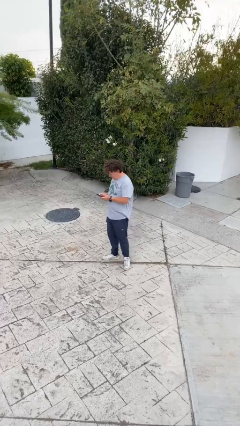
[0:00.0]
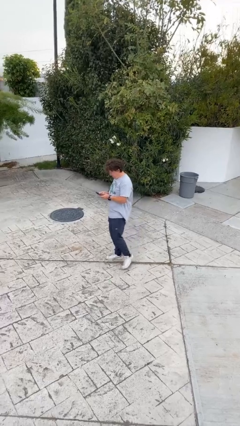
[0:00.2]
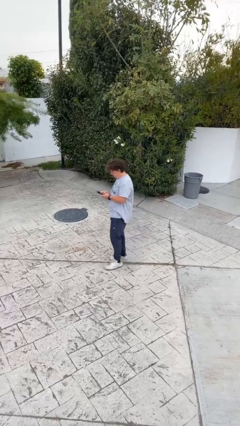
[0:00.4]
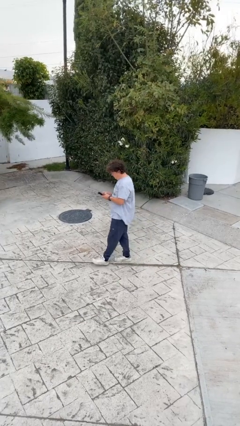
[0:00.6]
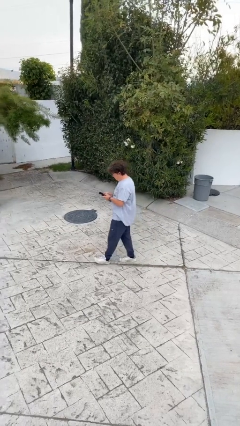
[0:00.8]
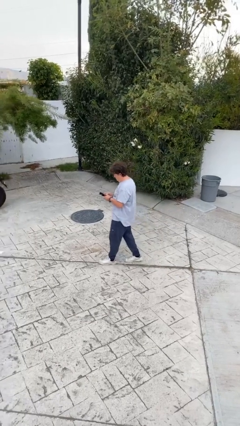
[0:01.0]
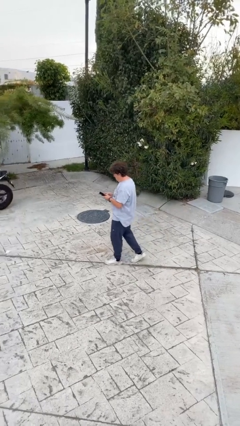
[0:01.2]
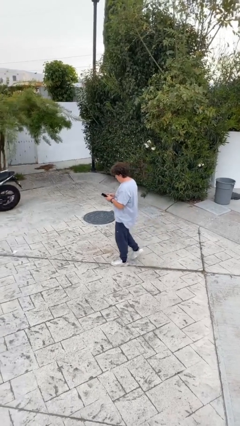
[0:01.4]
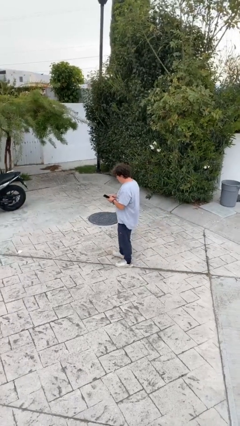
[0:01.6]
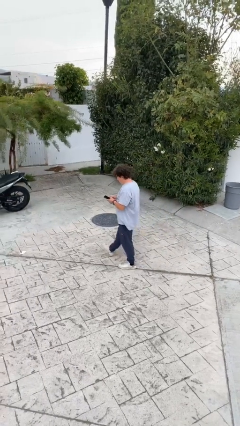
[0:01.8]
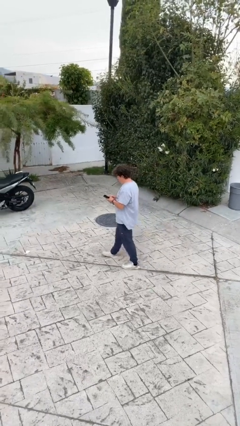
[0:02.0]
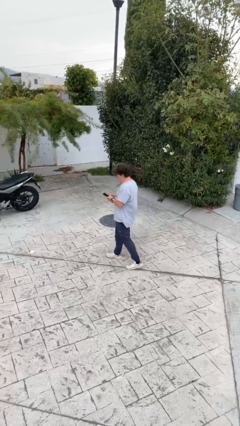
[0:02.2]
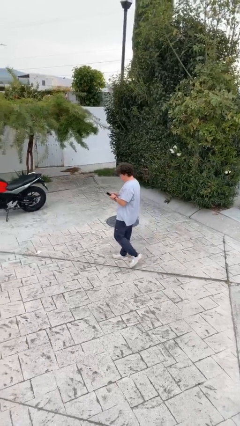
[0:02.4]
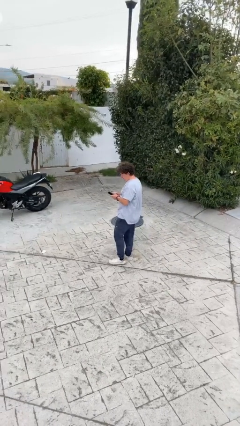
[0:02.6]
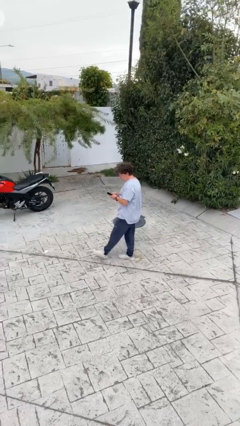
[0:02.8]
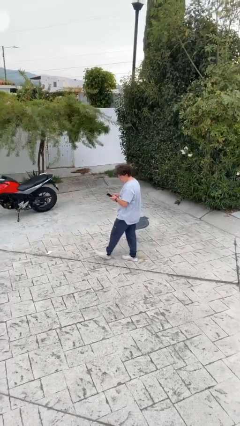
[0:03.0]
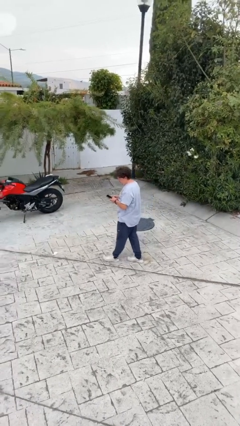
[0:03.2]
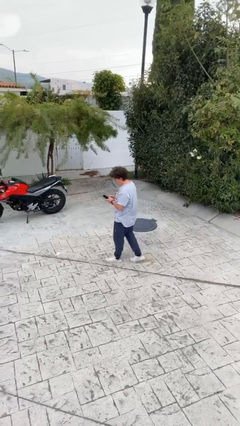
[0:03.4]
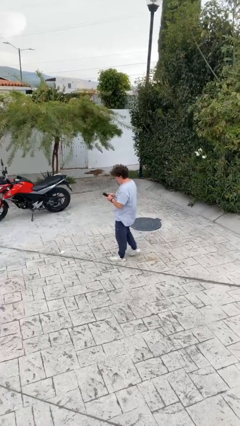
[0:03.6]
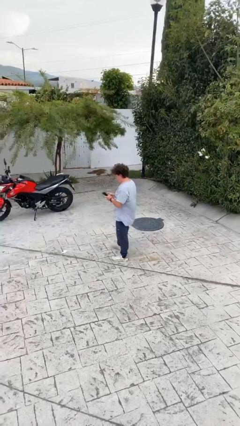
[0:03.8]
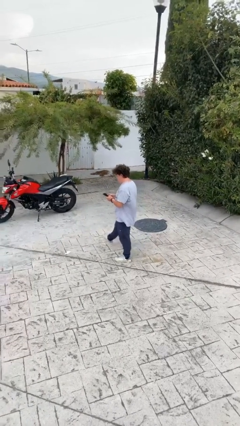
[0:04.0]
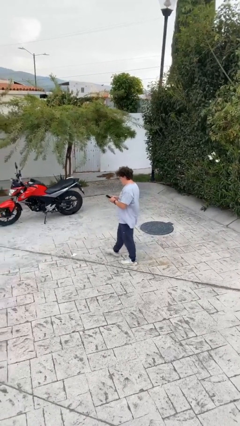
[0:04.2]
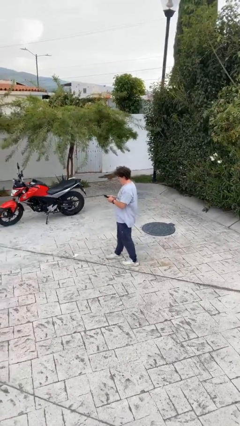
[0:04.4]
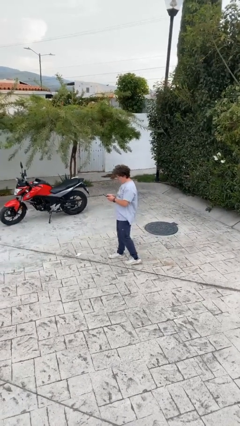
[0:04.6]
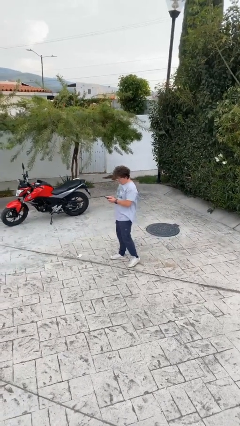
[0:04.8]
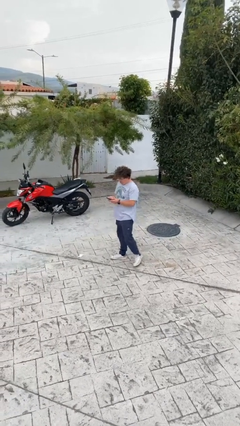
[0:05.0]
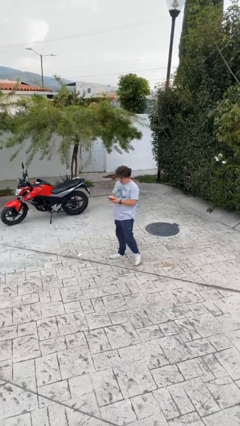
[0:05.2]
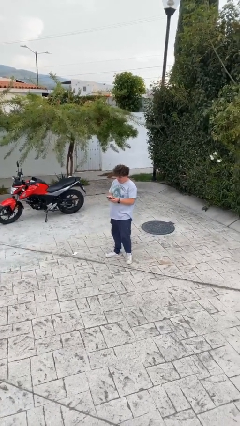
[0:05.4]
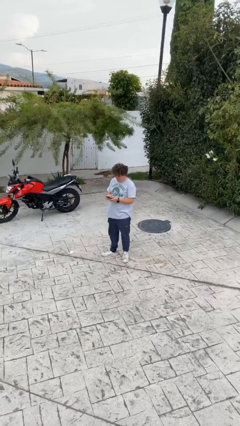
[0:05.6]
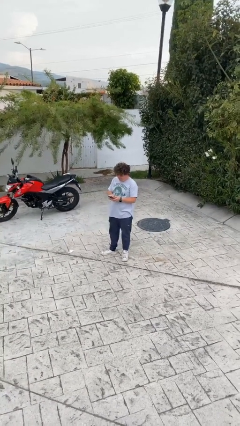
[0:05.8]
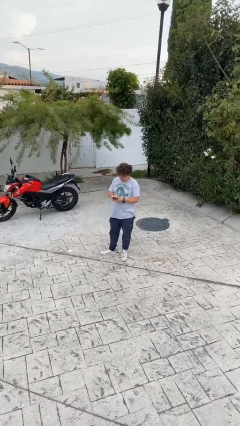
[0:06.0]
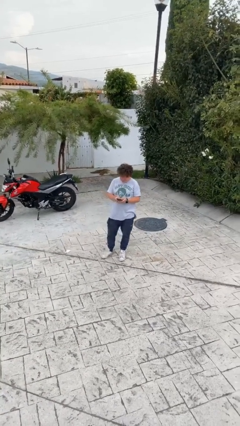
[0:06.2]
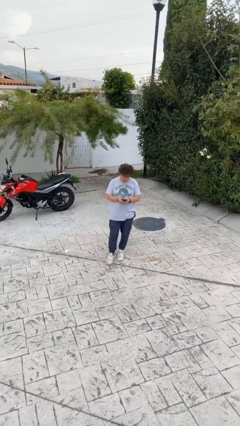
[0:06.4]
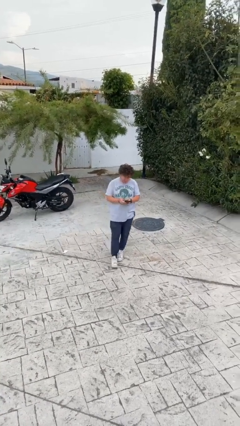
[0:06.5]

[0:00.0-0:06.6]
person texts on phone

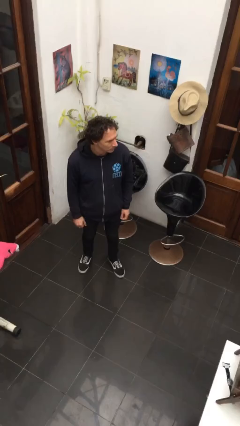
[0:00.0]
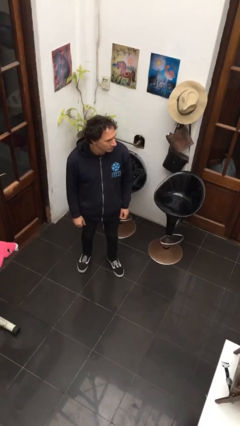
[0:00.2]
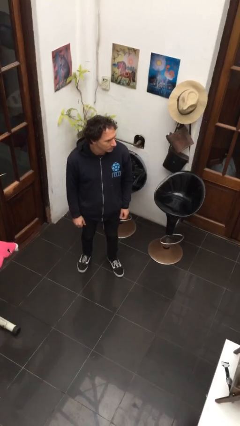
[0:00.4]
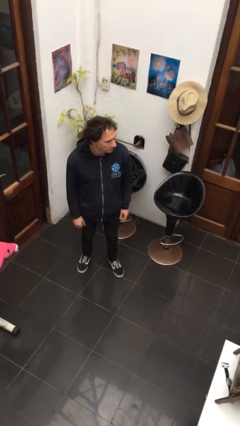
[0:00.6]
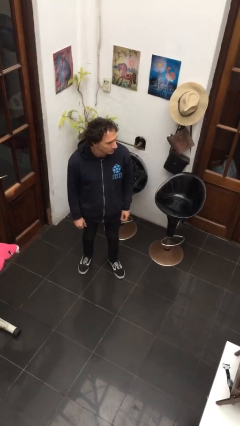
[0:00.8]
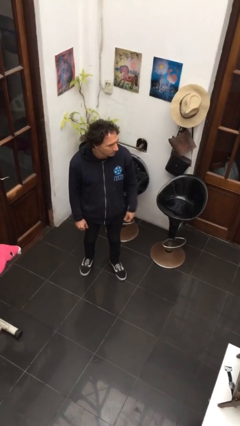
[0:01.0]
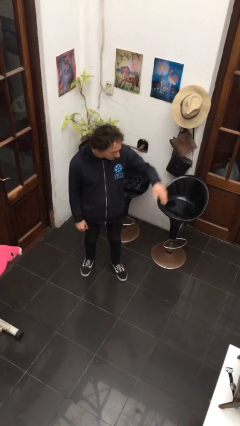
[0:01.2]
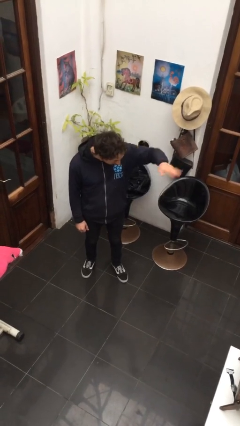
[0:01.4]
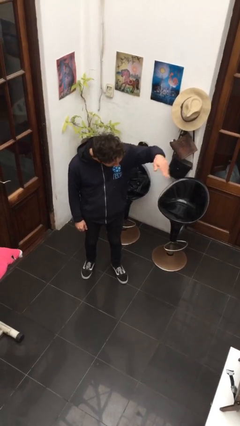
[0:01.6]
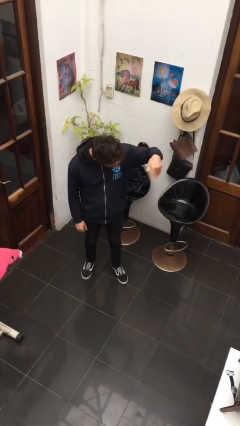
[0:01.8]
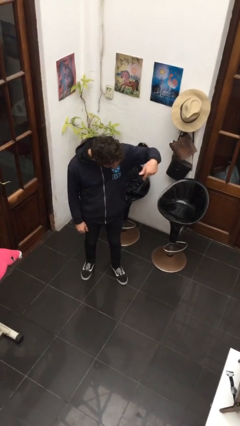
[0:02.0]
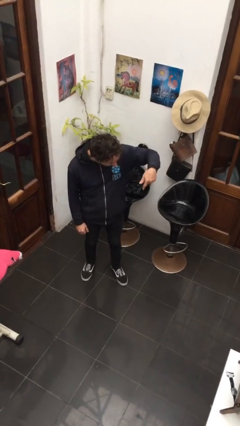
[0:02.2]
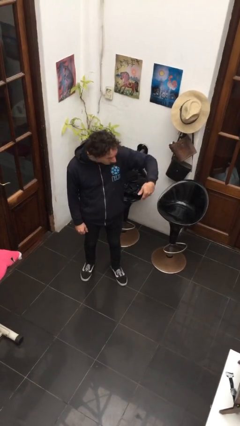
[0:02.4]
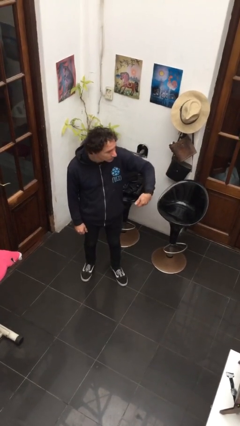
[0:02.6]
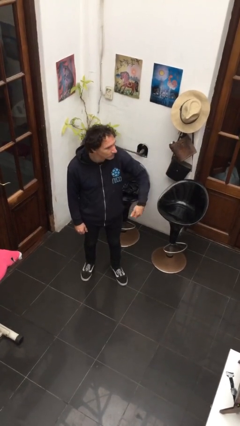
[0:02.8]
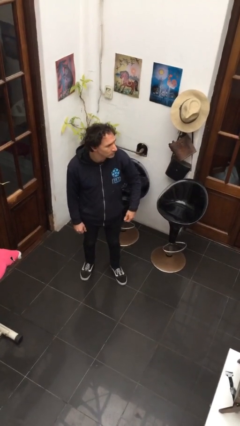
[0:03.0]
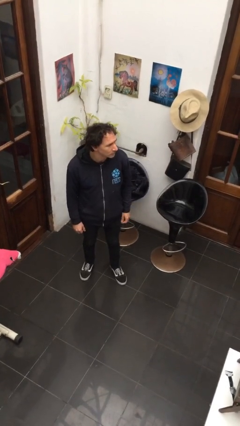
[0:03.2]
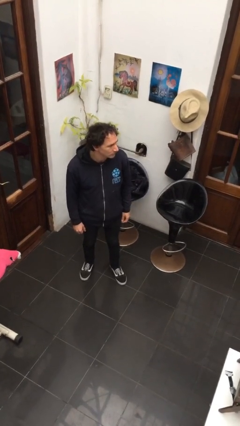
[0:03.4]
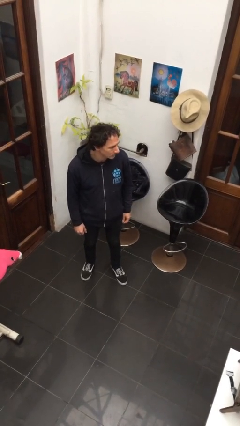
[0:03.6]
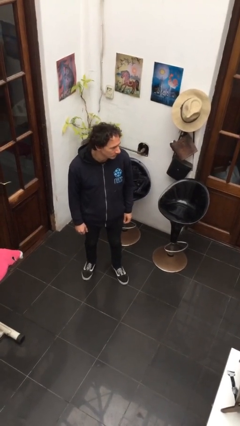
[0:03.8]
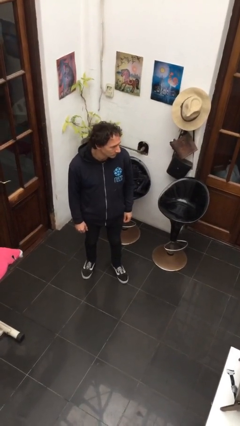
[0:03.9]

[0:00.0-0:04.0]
person gestures come here

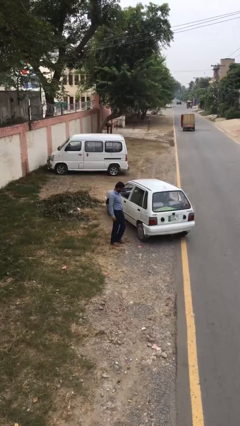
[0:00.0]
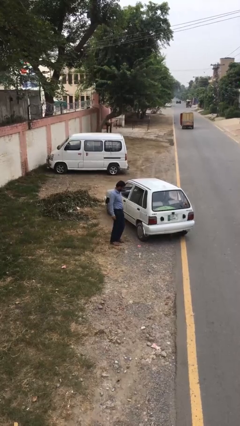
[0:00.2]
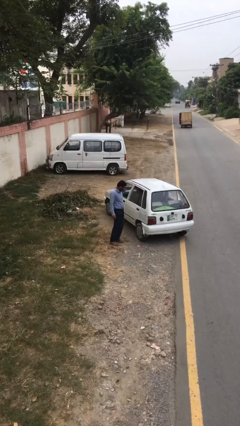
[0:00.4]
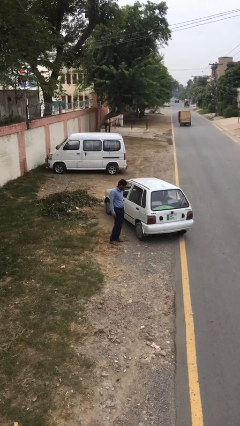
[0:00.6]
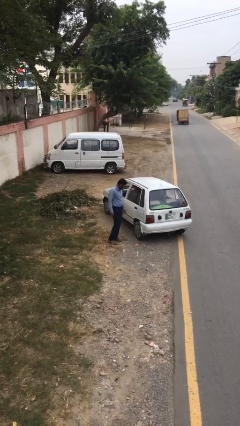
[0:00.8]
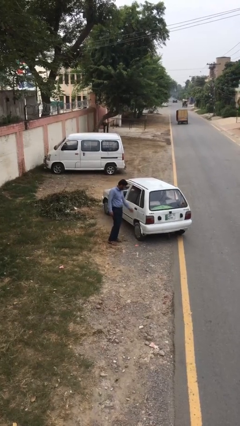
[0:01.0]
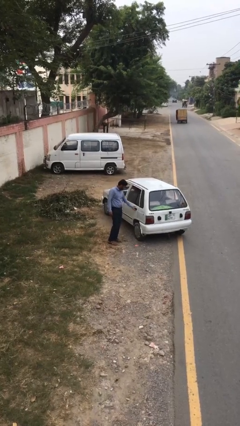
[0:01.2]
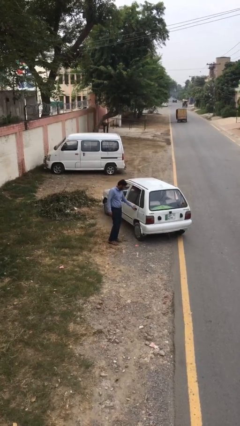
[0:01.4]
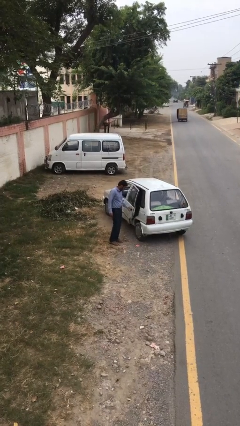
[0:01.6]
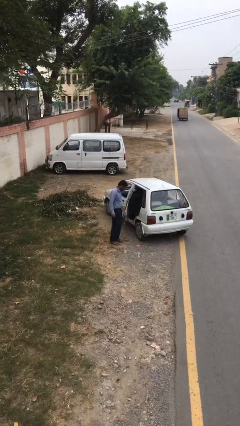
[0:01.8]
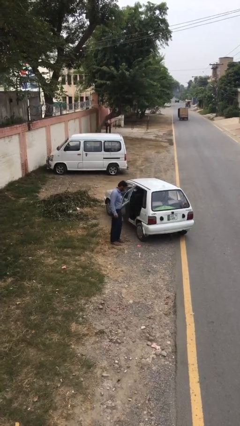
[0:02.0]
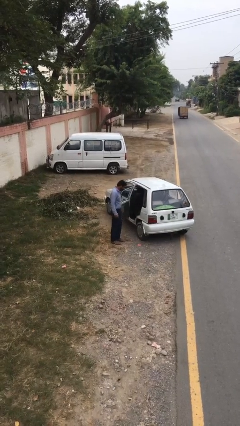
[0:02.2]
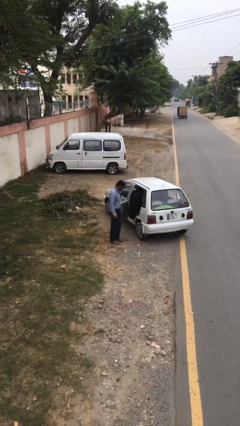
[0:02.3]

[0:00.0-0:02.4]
person opens car door

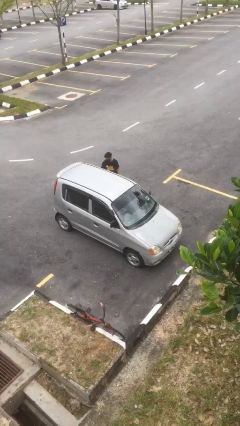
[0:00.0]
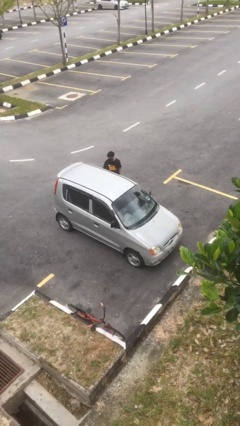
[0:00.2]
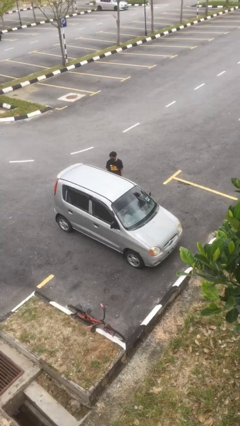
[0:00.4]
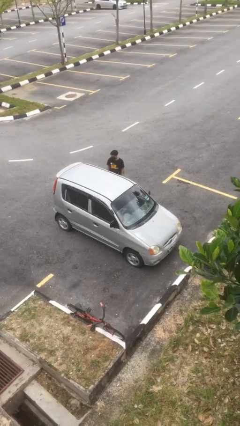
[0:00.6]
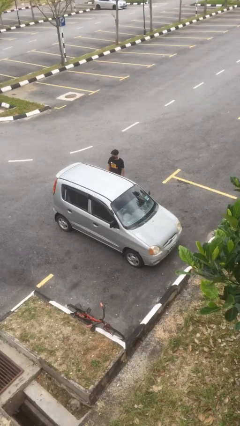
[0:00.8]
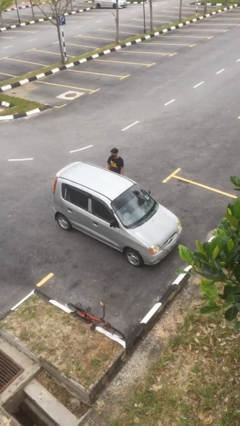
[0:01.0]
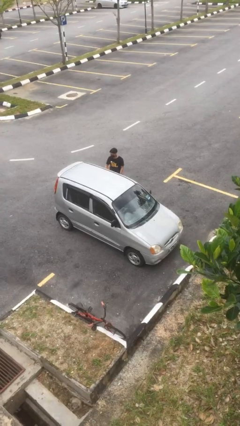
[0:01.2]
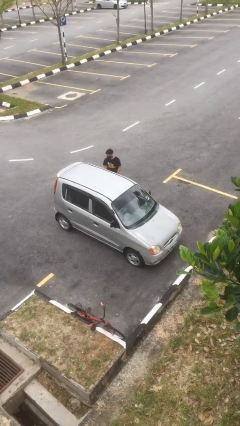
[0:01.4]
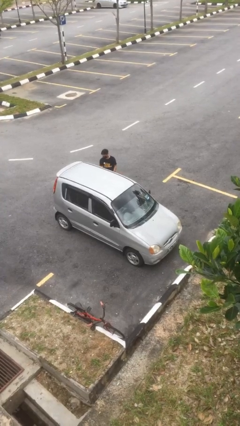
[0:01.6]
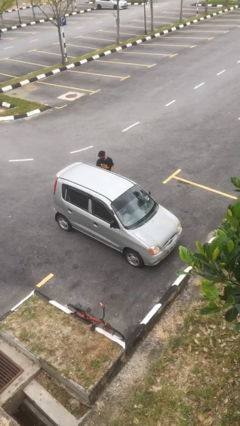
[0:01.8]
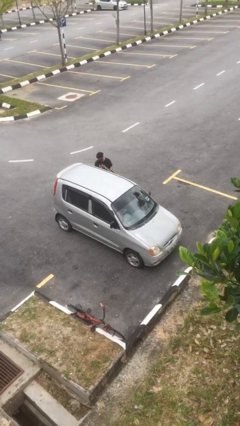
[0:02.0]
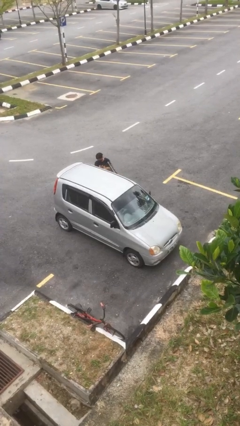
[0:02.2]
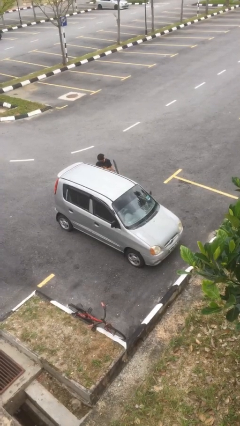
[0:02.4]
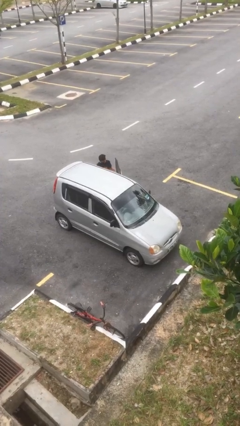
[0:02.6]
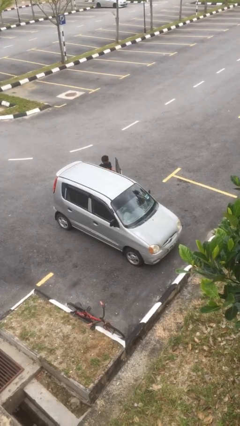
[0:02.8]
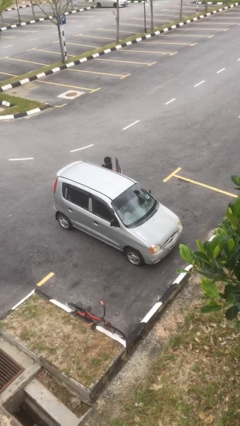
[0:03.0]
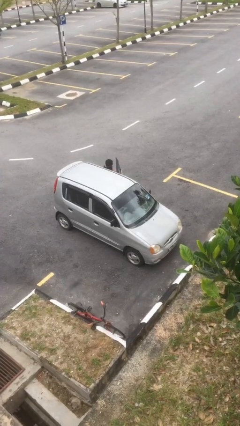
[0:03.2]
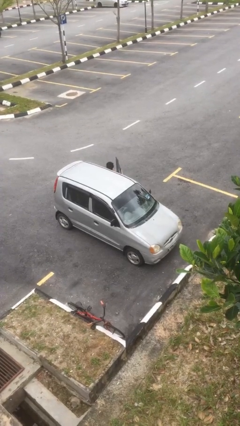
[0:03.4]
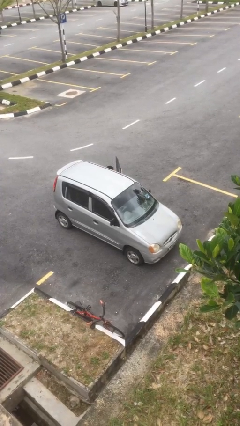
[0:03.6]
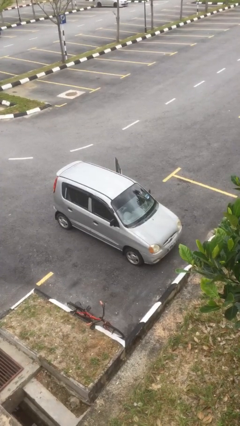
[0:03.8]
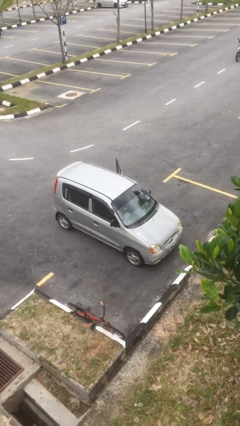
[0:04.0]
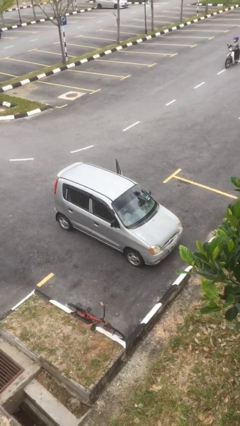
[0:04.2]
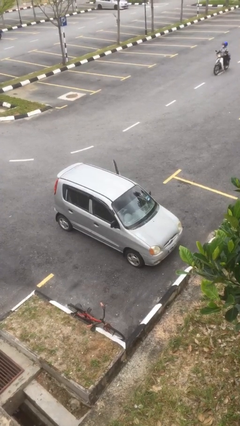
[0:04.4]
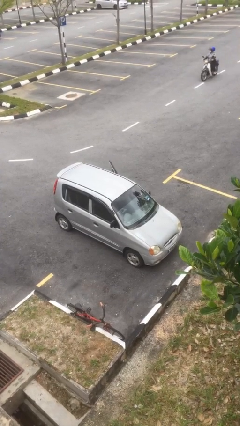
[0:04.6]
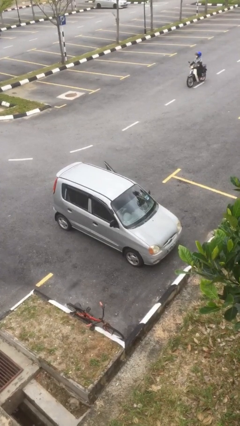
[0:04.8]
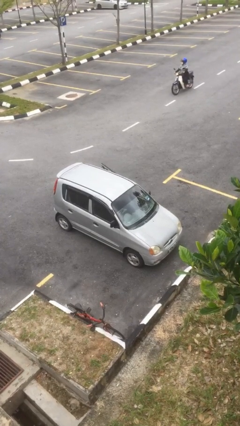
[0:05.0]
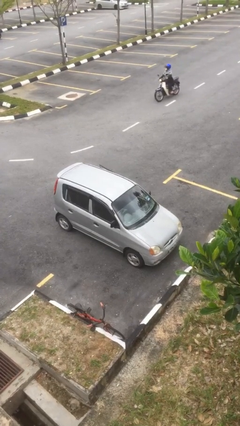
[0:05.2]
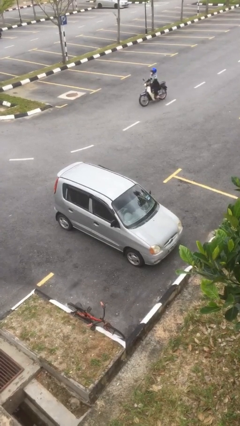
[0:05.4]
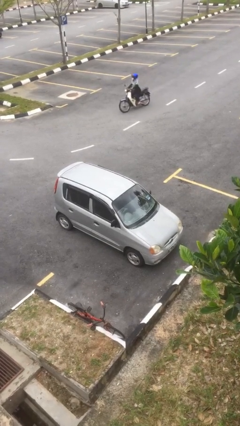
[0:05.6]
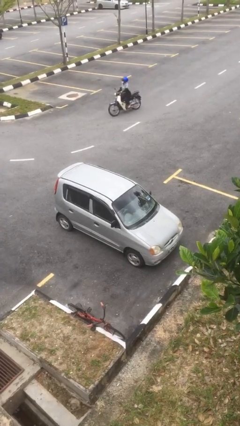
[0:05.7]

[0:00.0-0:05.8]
car picks up person
